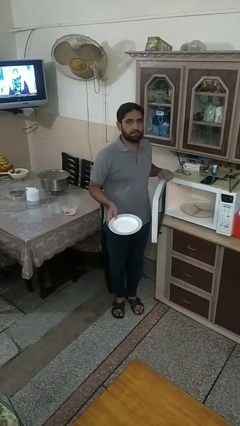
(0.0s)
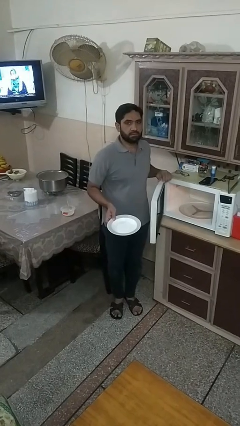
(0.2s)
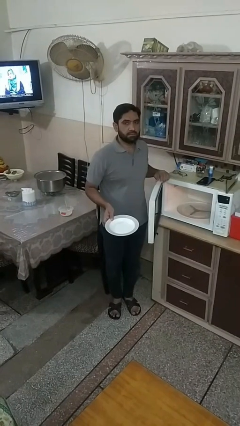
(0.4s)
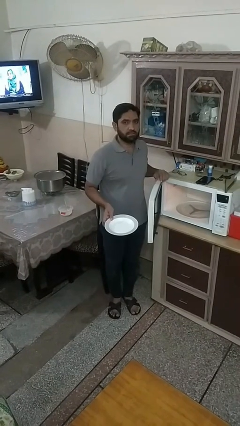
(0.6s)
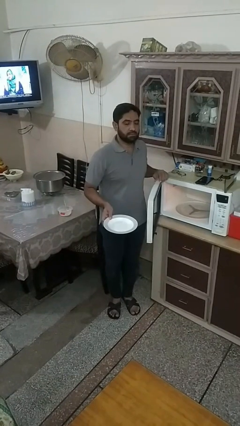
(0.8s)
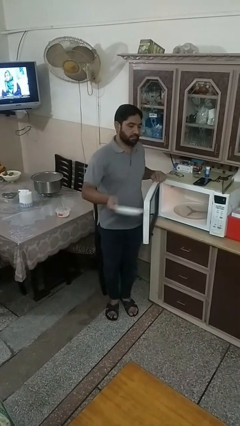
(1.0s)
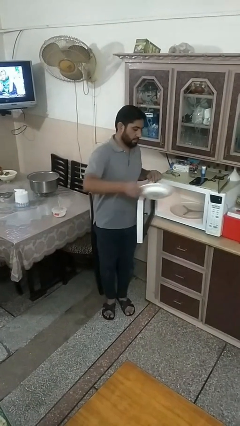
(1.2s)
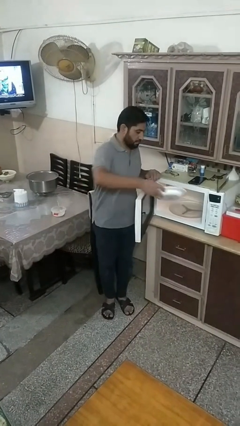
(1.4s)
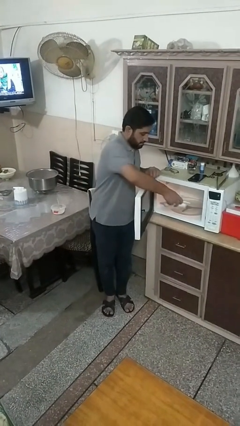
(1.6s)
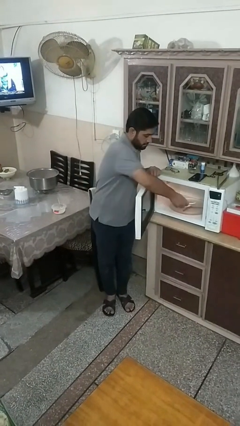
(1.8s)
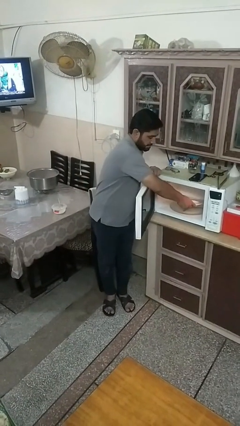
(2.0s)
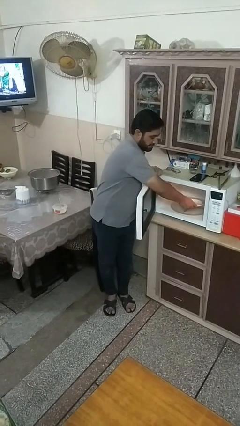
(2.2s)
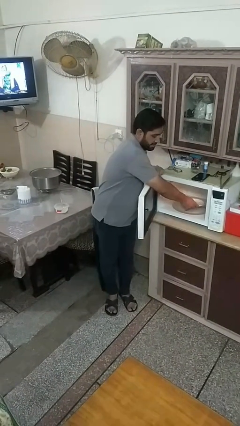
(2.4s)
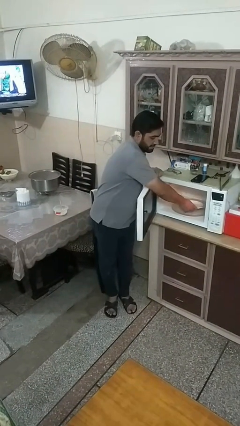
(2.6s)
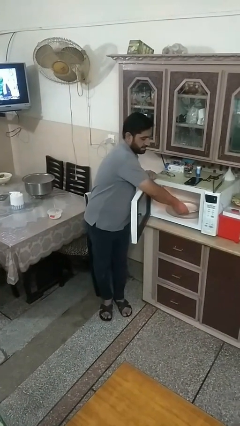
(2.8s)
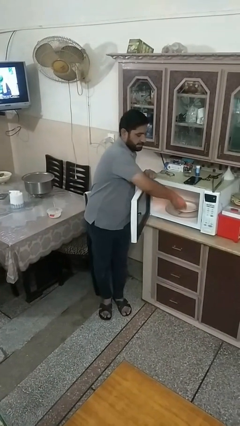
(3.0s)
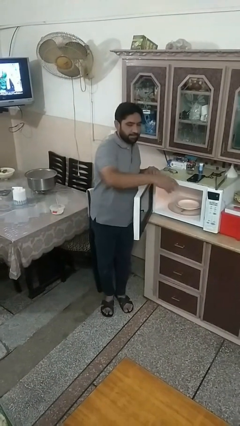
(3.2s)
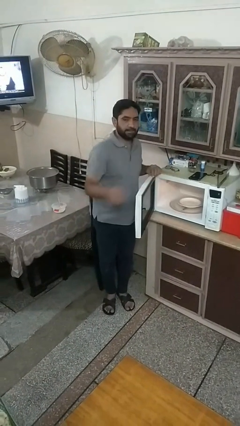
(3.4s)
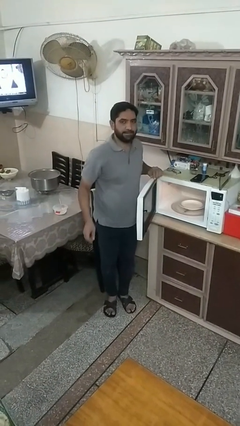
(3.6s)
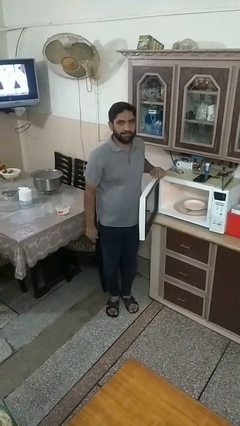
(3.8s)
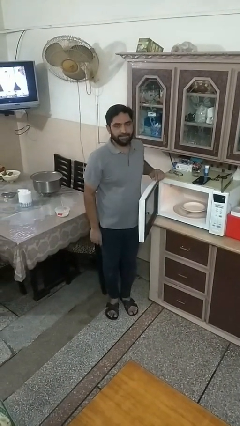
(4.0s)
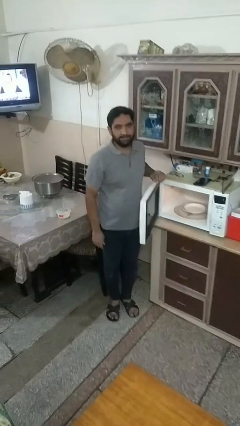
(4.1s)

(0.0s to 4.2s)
person puts object into microwave

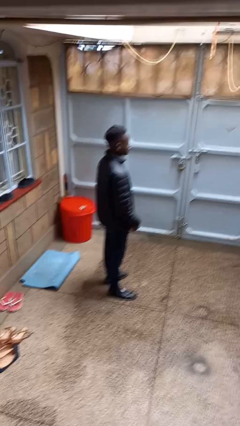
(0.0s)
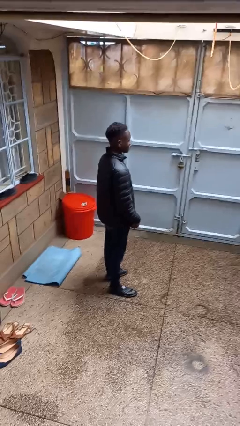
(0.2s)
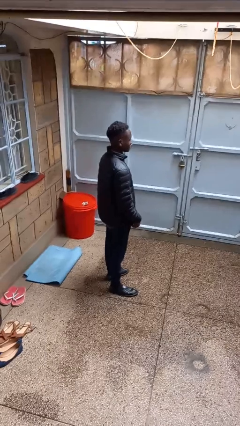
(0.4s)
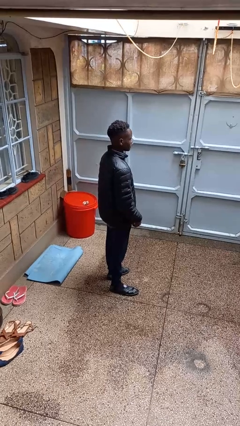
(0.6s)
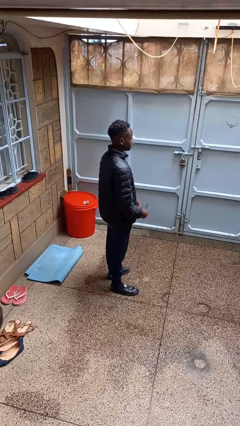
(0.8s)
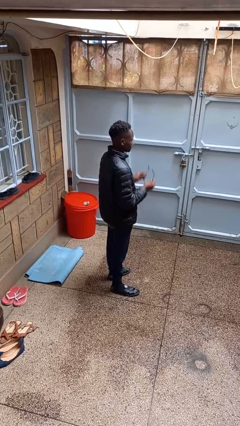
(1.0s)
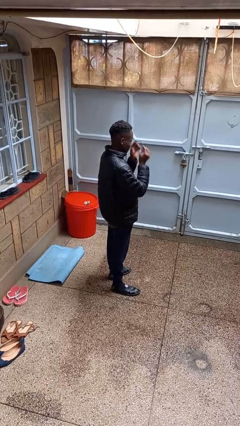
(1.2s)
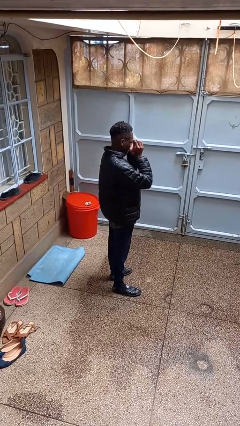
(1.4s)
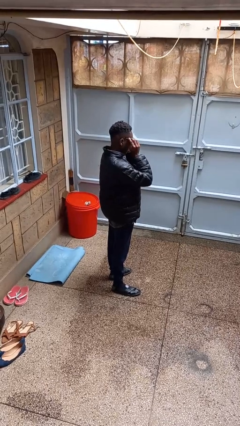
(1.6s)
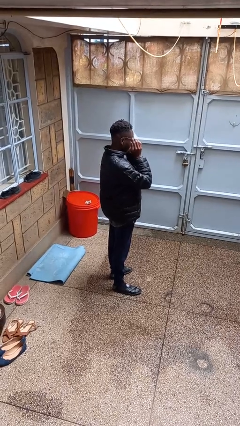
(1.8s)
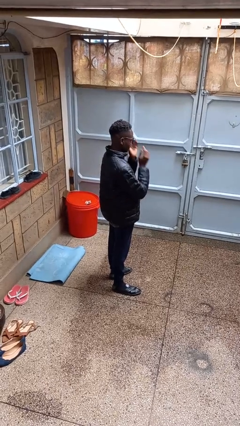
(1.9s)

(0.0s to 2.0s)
person puts on glasses

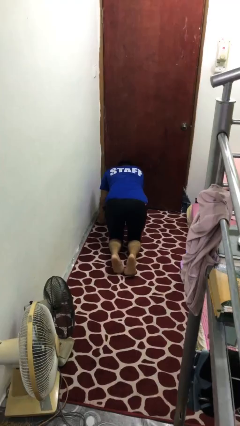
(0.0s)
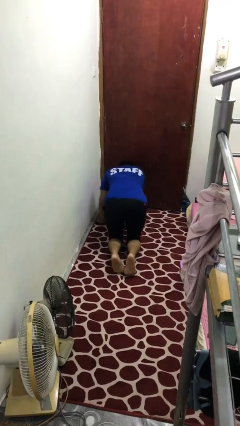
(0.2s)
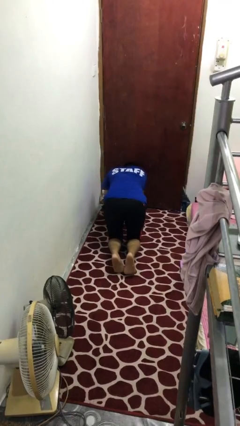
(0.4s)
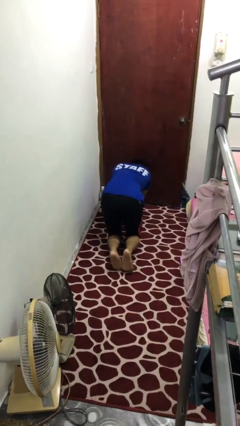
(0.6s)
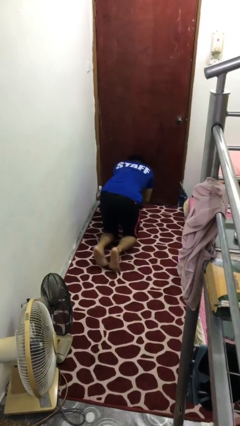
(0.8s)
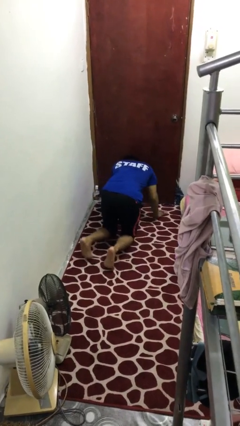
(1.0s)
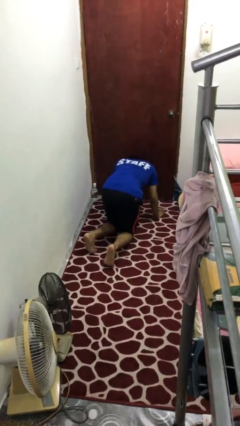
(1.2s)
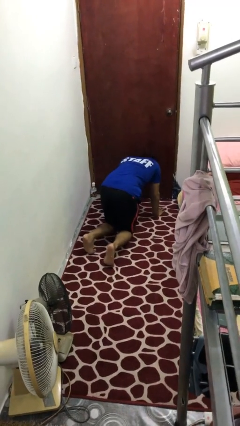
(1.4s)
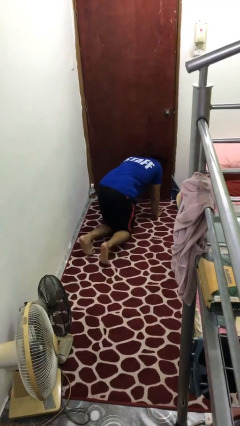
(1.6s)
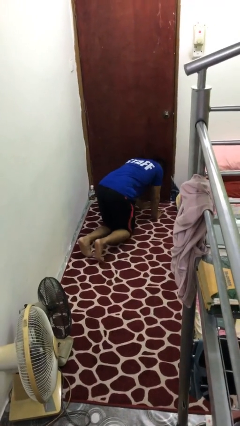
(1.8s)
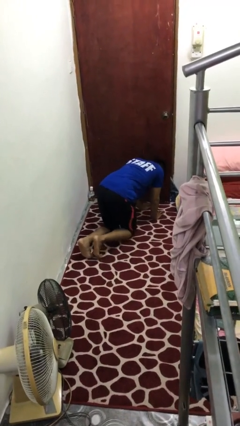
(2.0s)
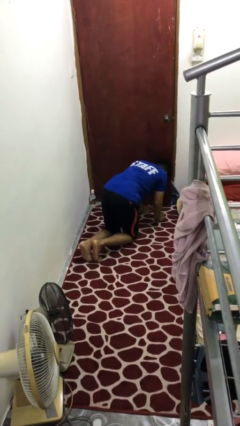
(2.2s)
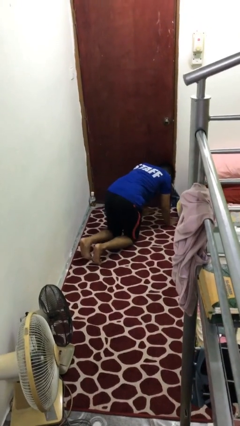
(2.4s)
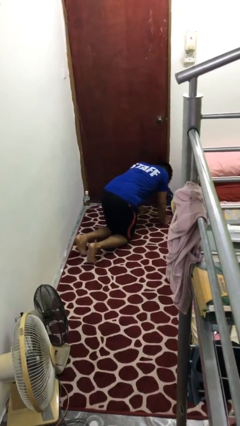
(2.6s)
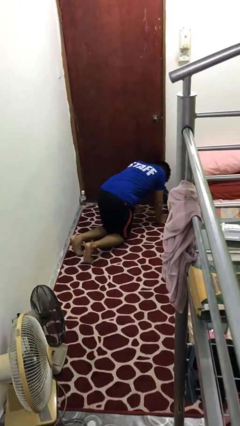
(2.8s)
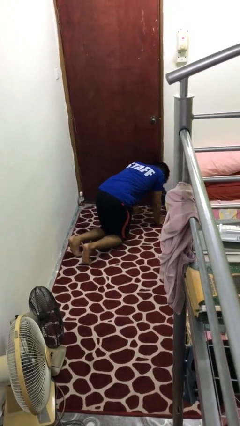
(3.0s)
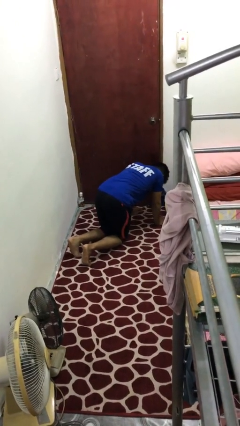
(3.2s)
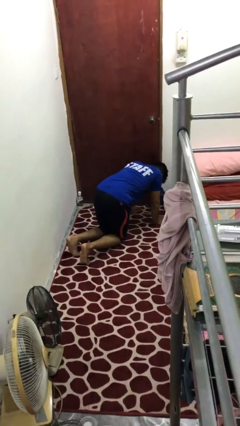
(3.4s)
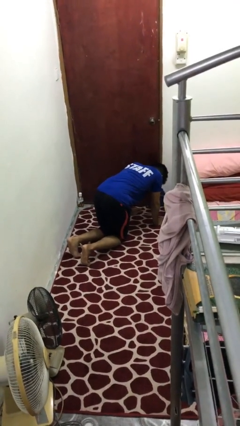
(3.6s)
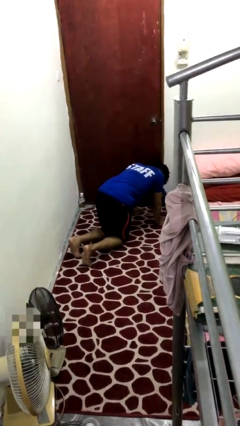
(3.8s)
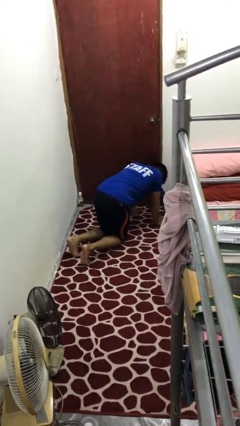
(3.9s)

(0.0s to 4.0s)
person crawls

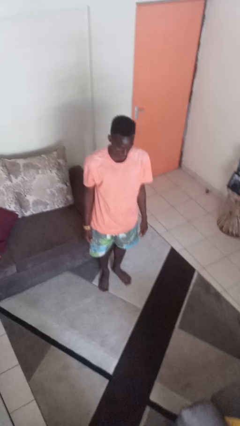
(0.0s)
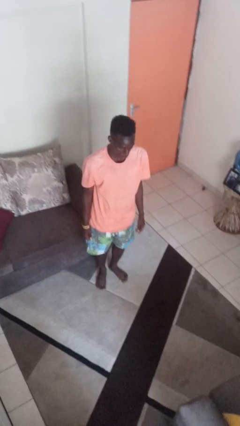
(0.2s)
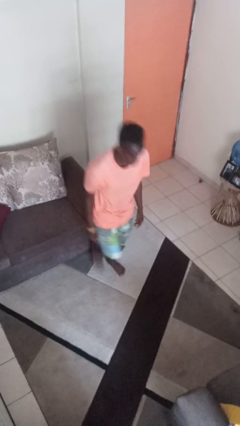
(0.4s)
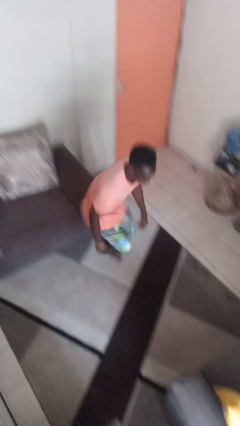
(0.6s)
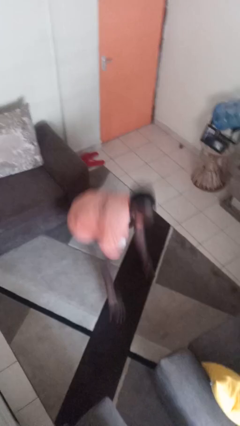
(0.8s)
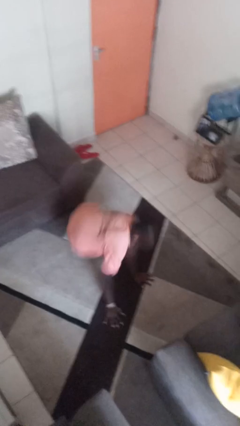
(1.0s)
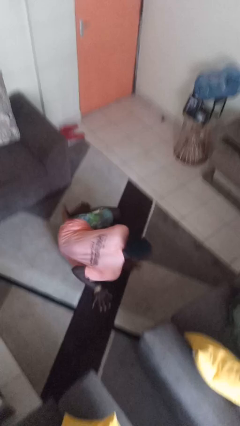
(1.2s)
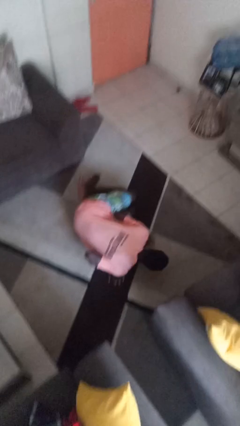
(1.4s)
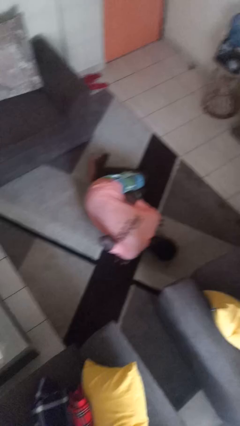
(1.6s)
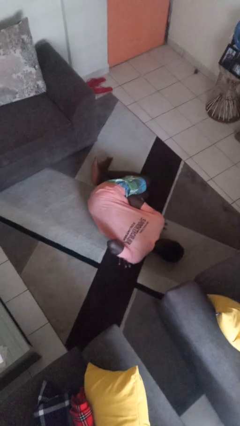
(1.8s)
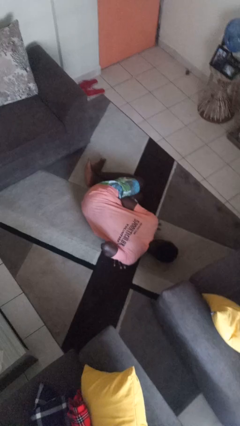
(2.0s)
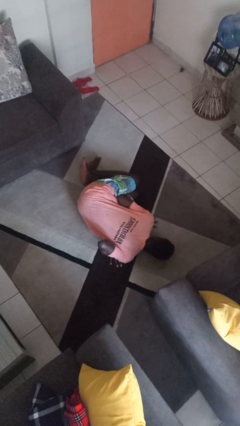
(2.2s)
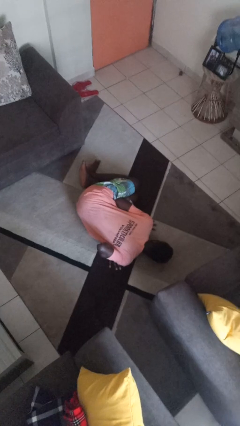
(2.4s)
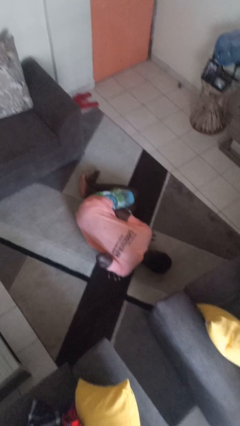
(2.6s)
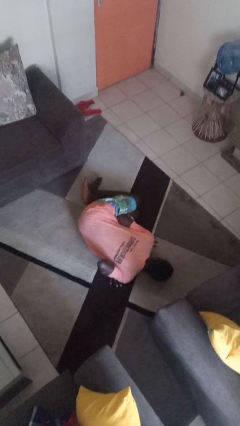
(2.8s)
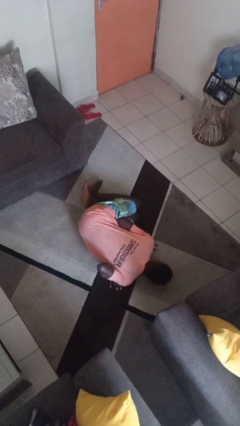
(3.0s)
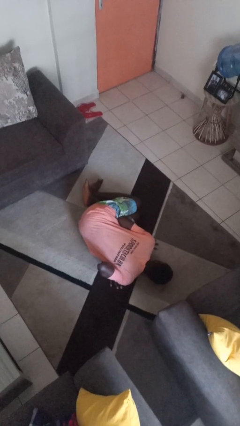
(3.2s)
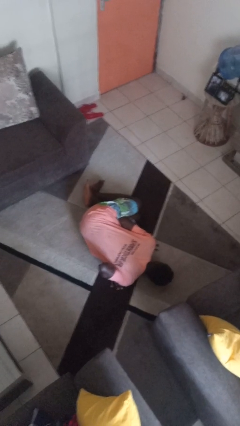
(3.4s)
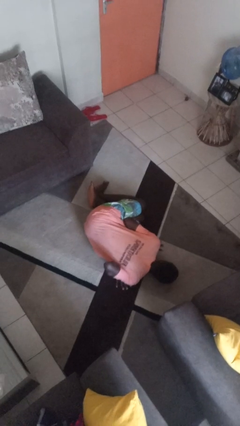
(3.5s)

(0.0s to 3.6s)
person falls while standing

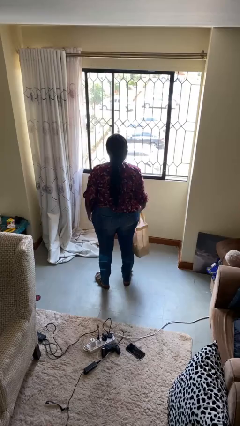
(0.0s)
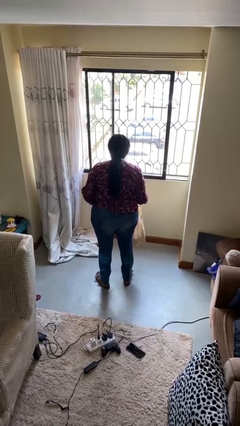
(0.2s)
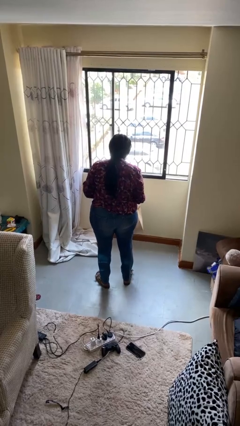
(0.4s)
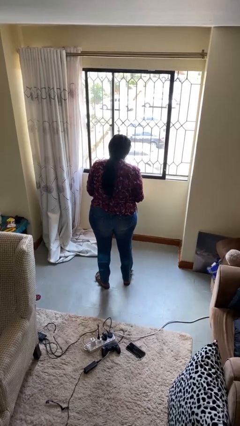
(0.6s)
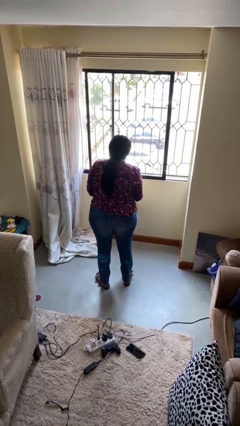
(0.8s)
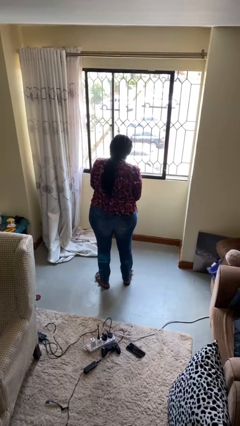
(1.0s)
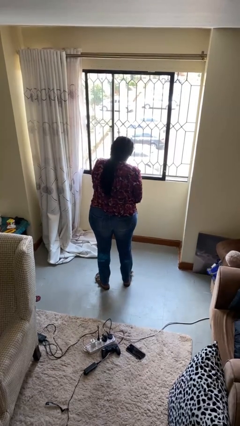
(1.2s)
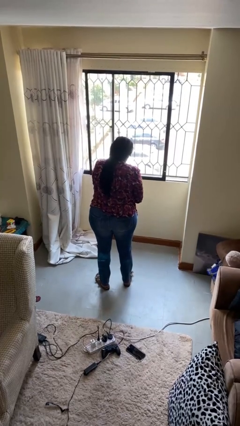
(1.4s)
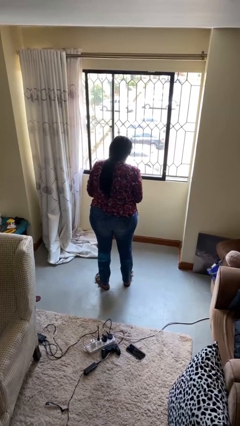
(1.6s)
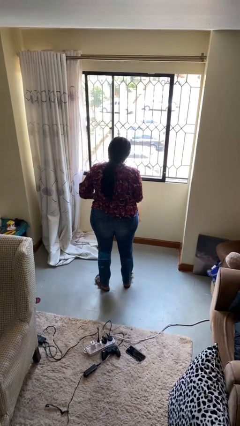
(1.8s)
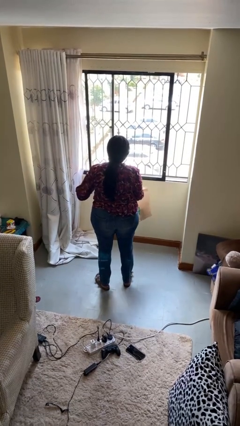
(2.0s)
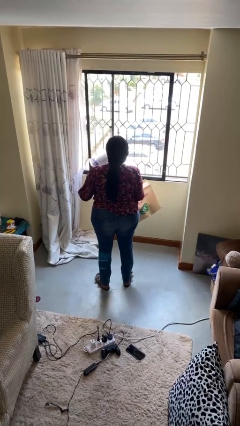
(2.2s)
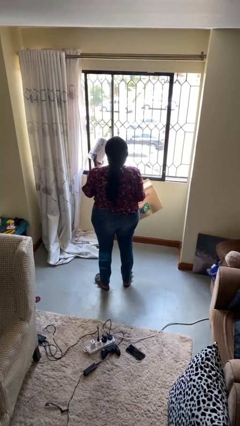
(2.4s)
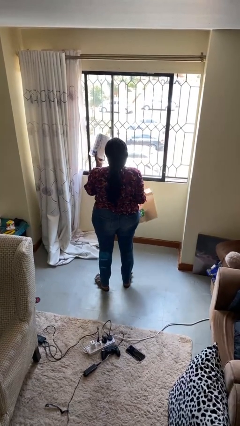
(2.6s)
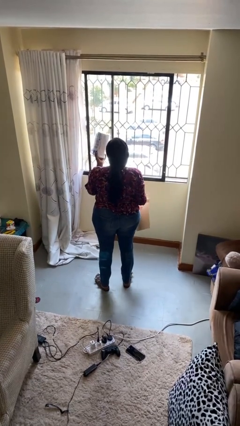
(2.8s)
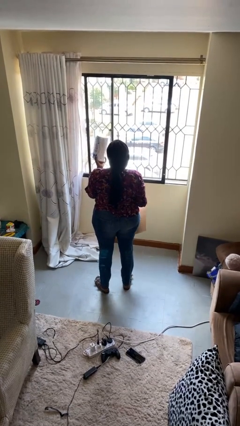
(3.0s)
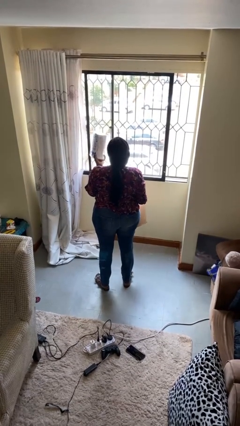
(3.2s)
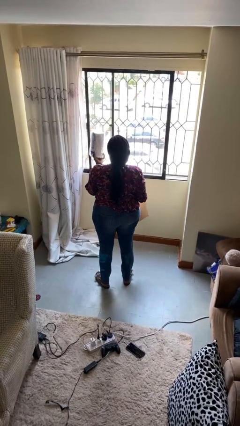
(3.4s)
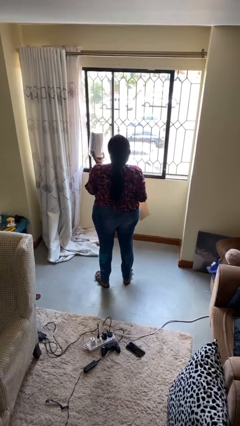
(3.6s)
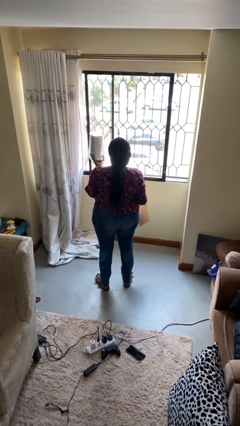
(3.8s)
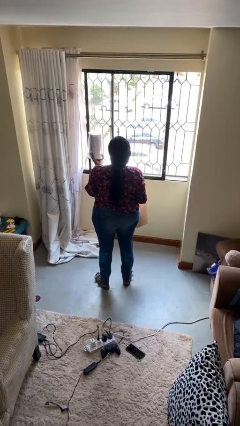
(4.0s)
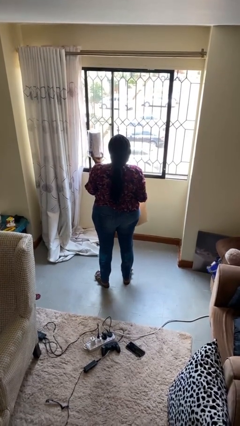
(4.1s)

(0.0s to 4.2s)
person takes object from bag
